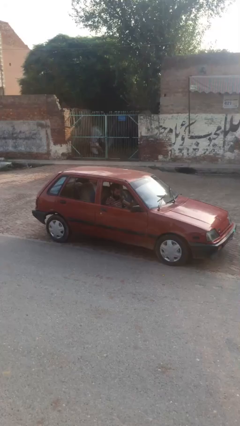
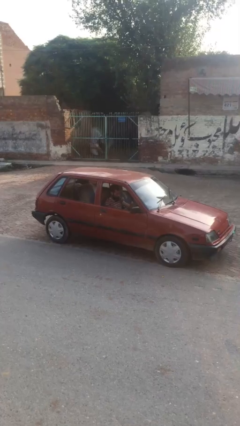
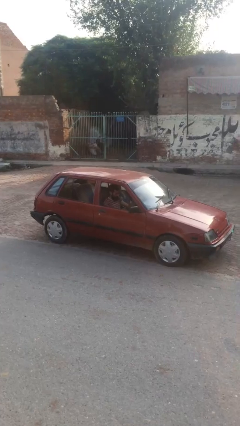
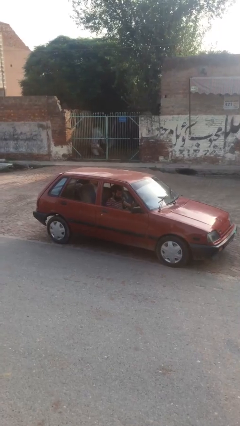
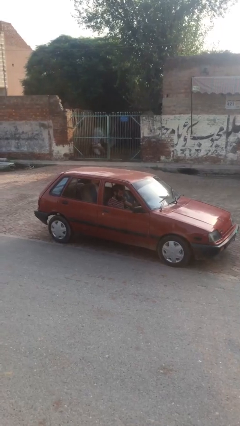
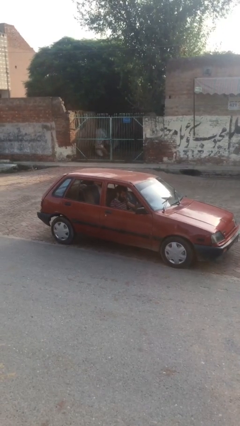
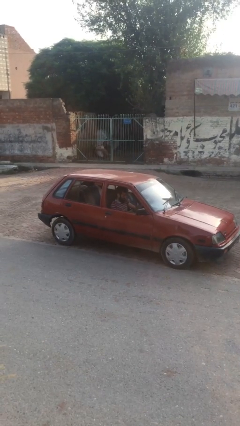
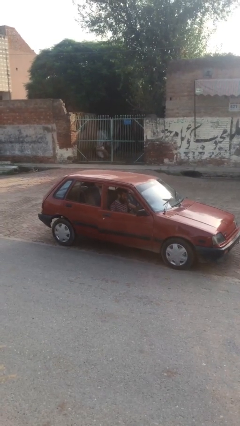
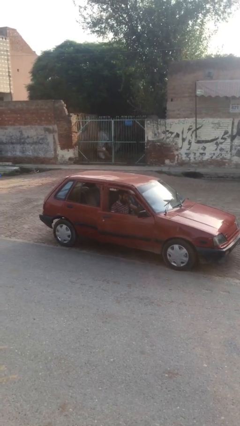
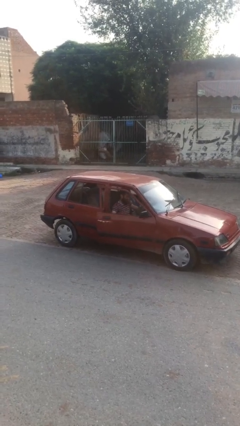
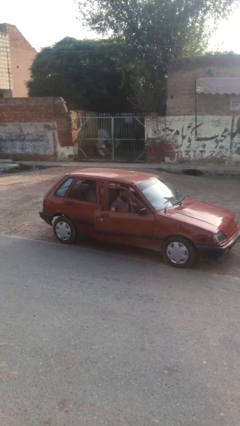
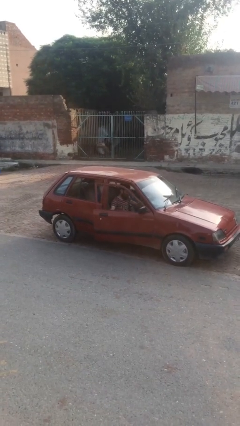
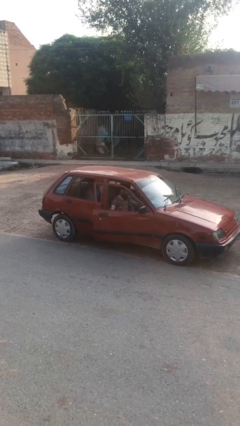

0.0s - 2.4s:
person opens car door

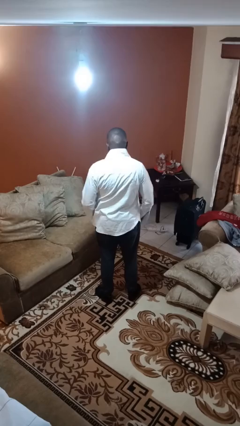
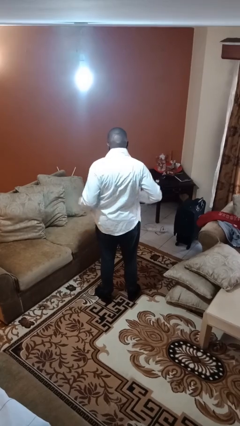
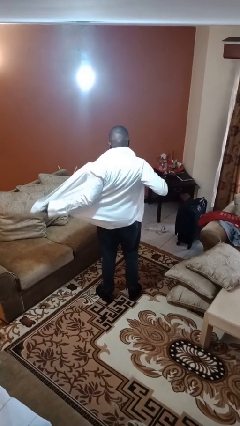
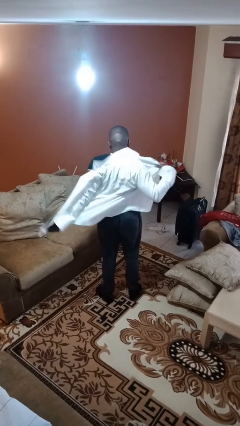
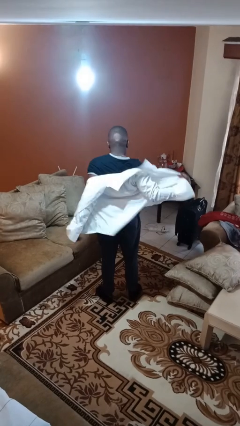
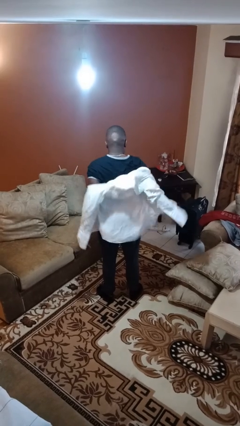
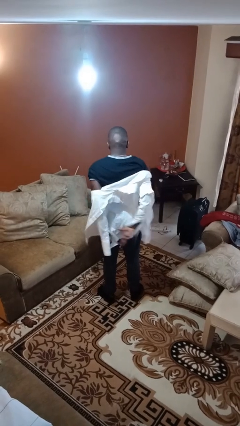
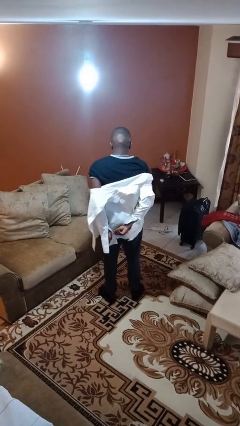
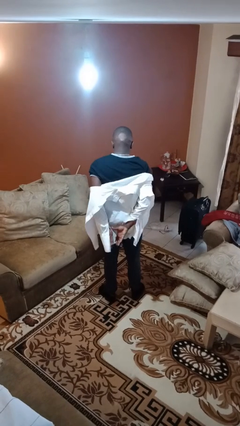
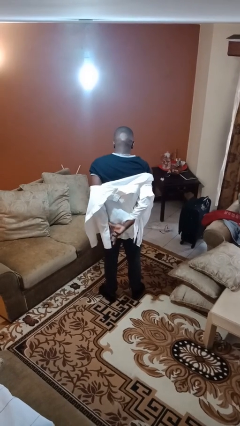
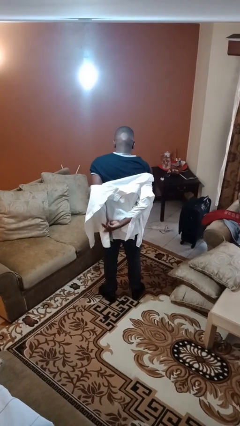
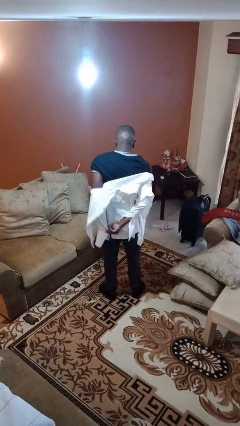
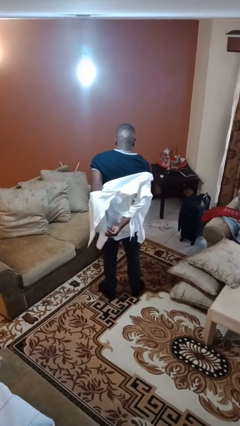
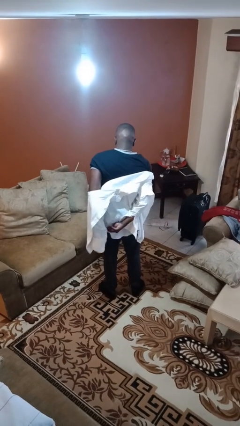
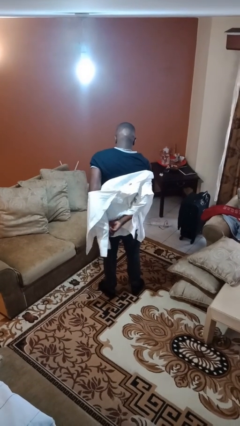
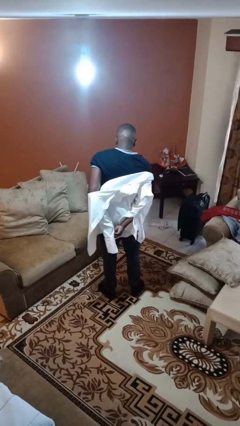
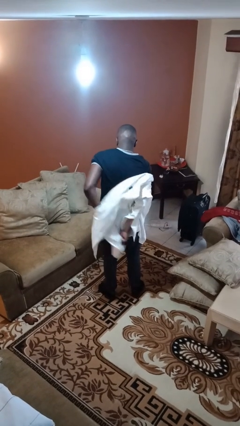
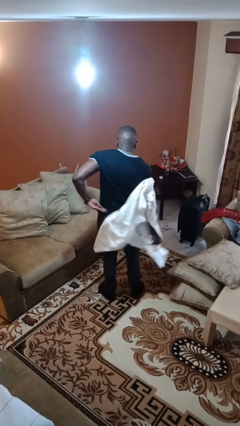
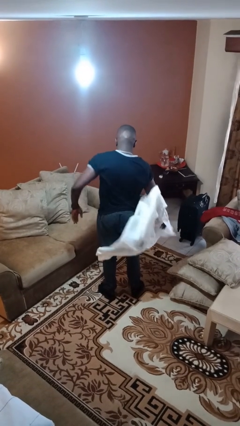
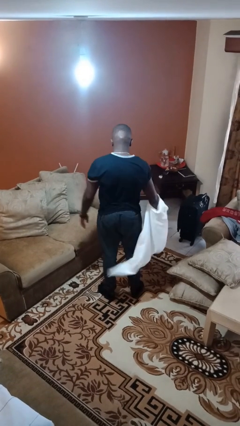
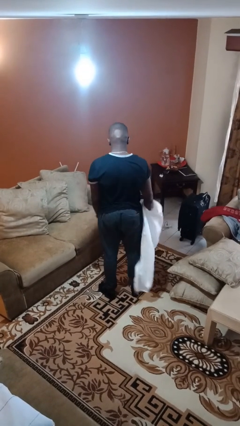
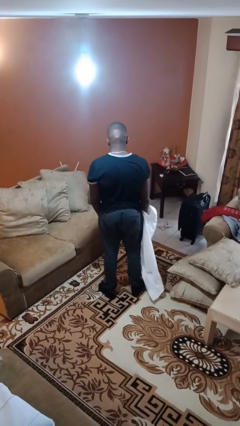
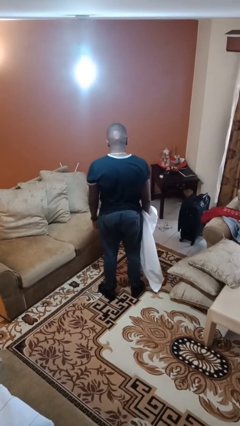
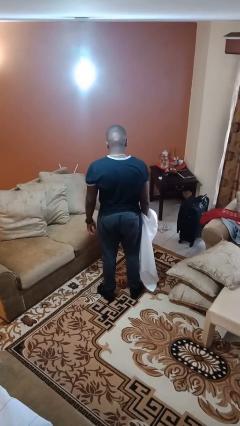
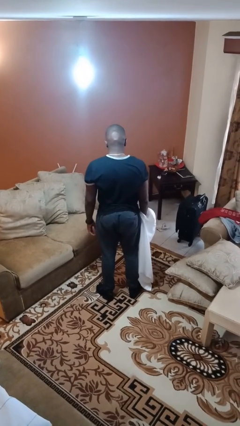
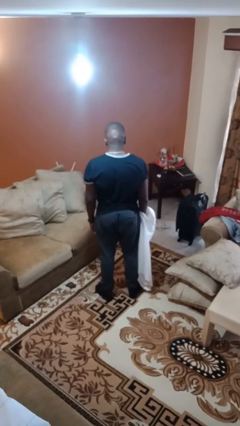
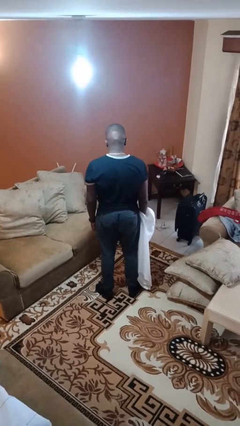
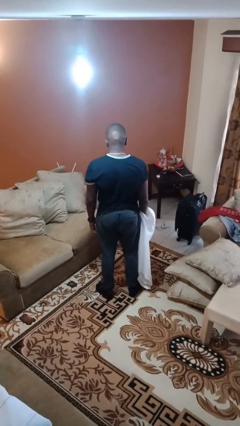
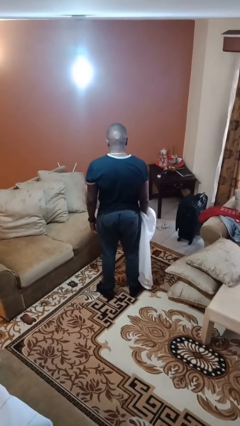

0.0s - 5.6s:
person takes off shirt

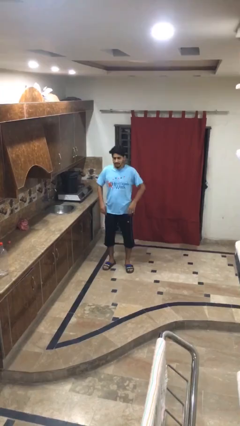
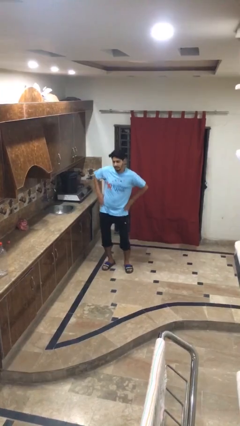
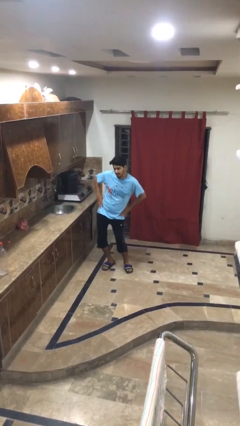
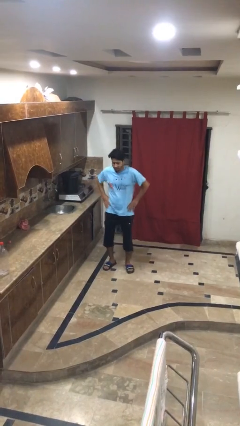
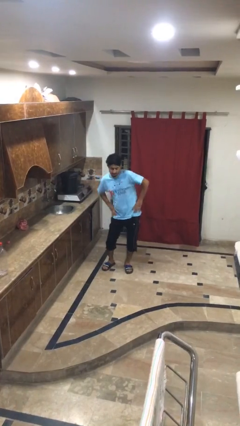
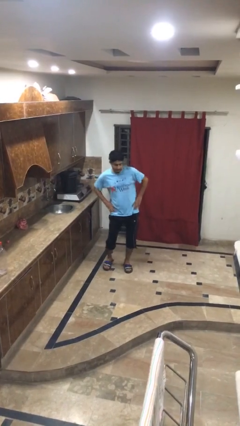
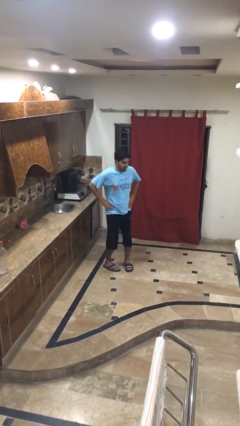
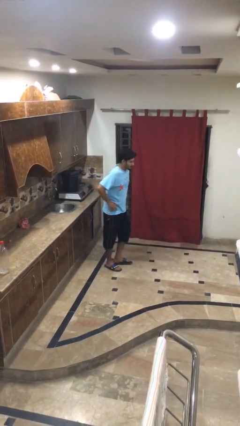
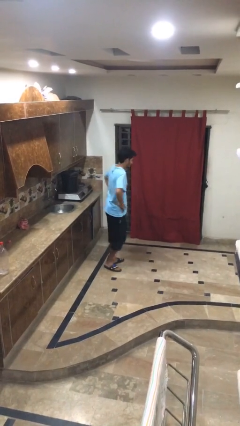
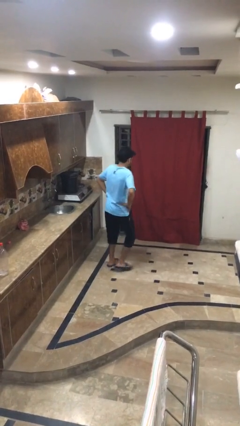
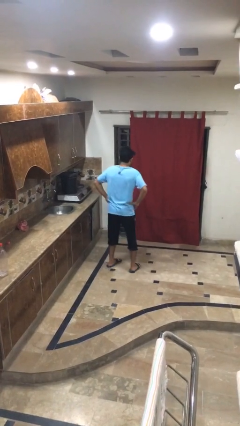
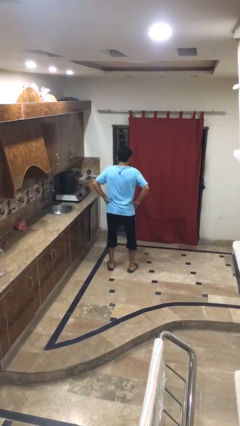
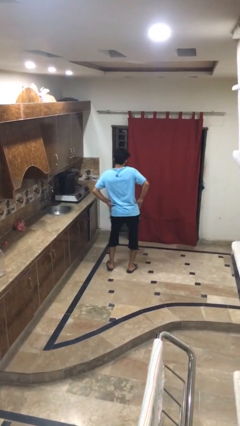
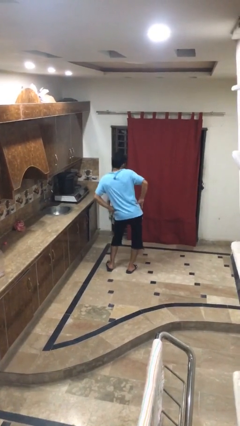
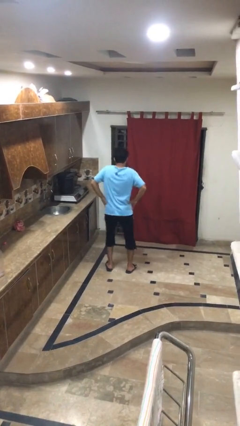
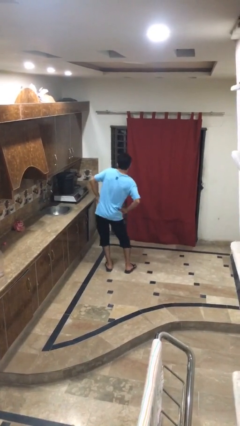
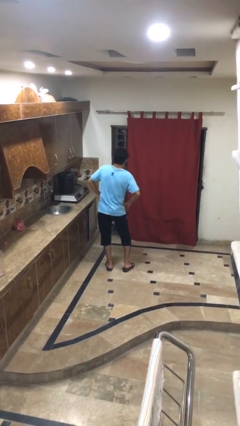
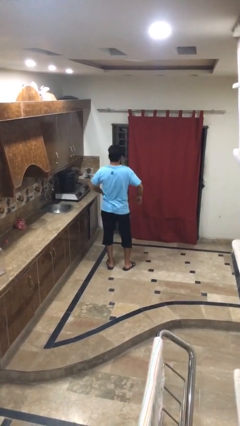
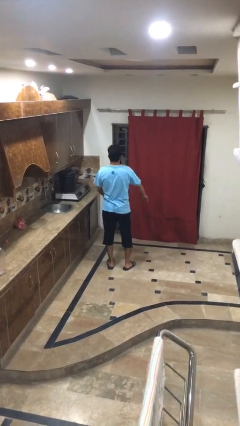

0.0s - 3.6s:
person wiggles hips

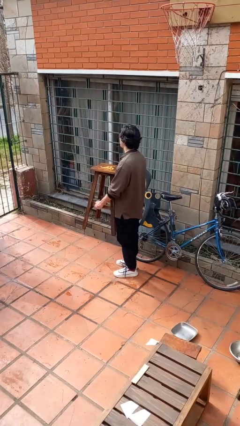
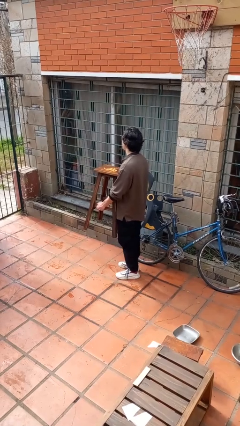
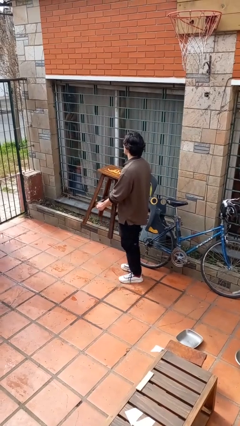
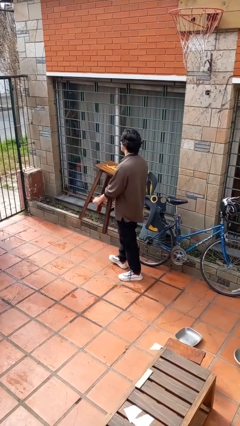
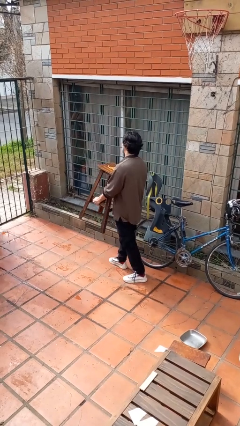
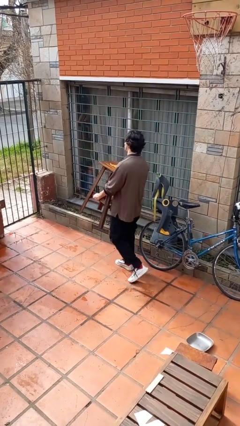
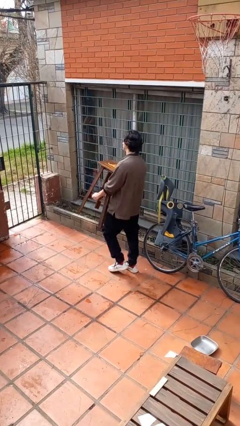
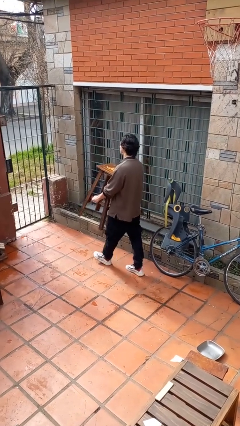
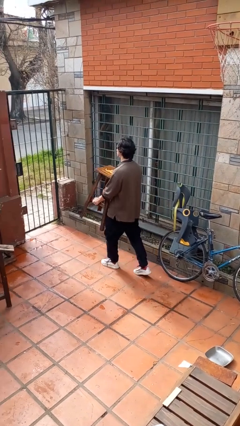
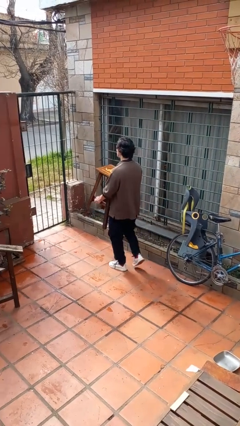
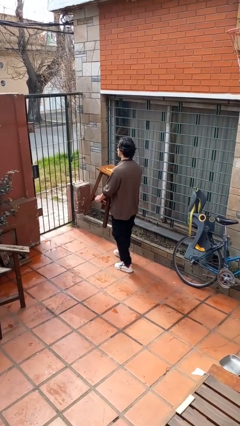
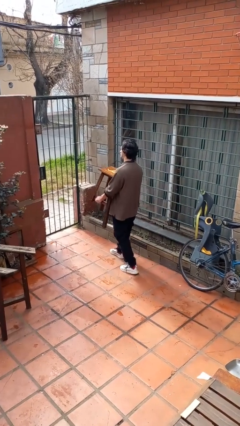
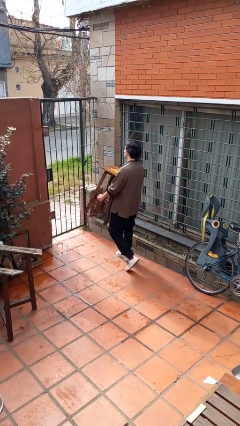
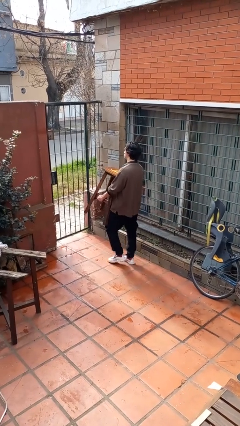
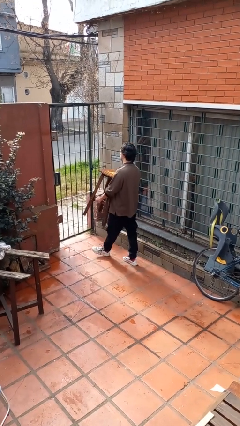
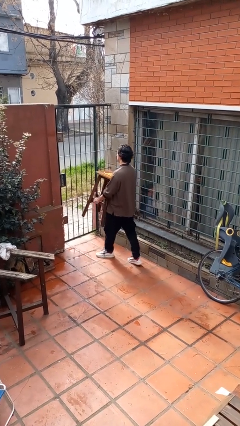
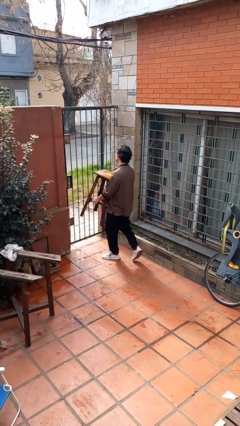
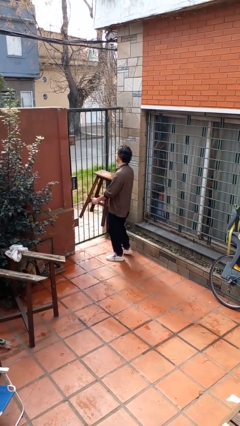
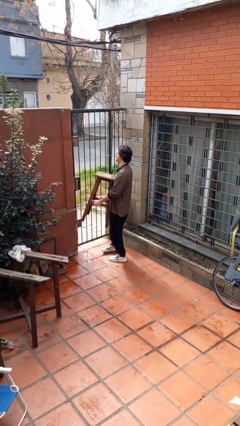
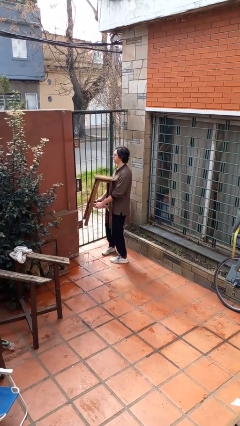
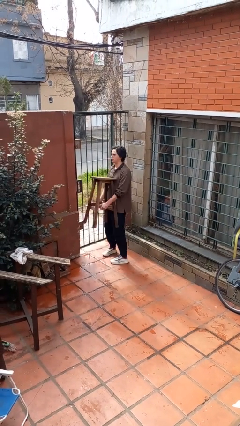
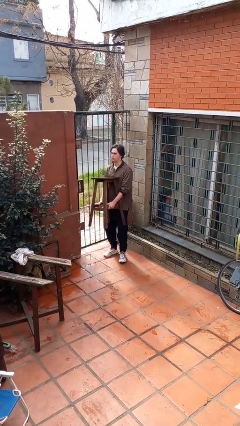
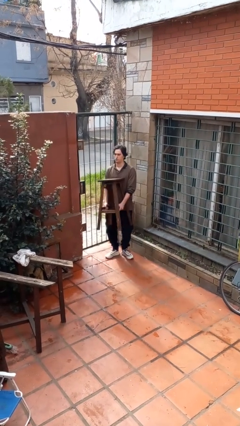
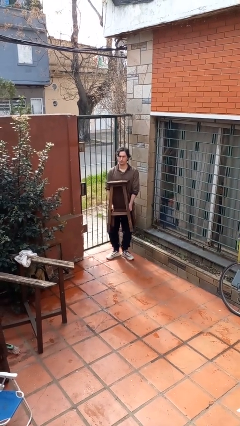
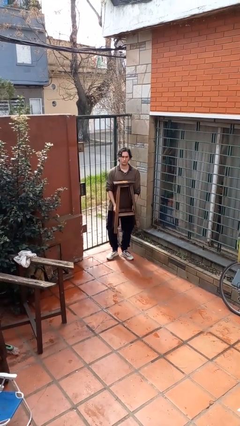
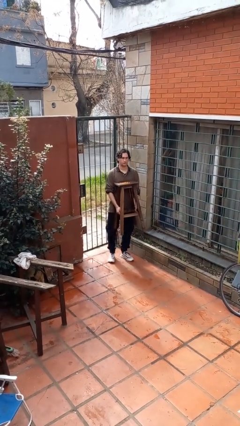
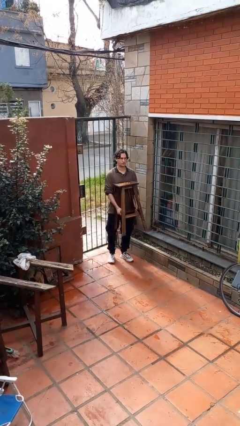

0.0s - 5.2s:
person carries furniture

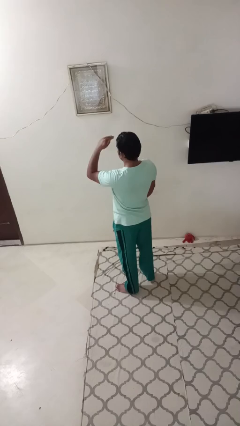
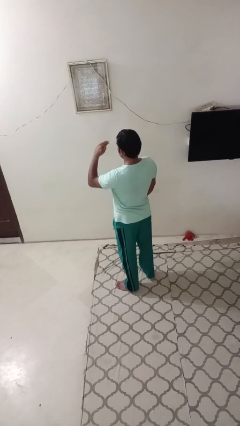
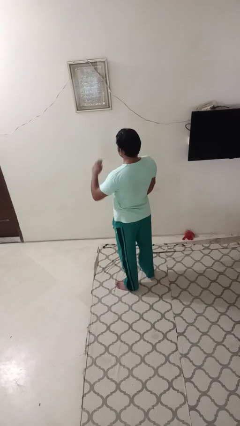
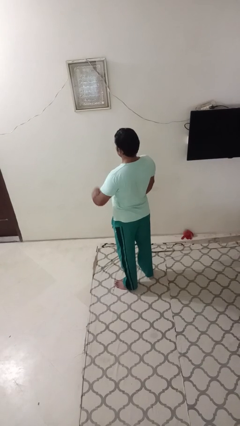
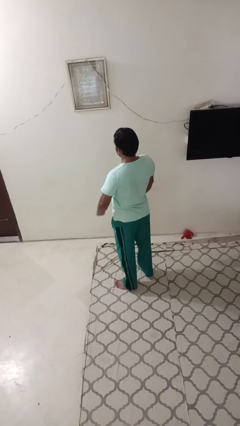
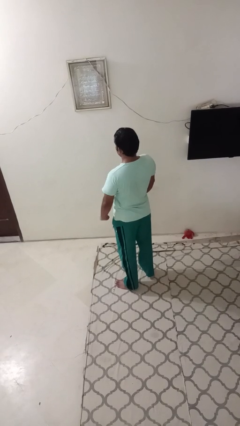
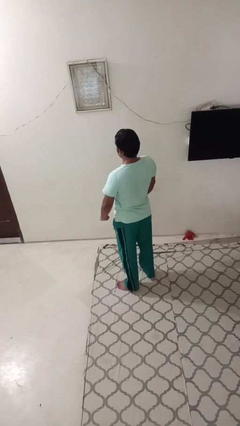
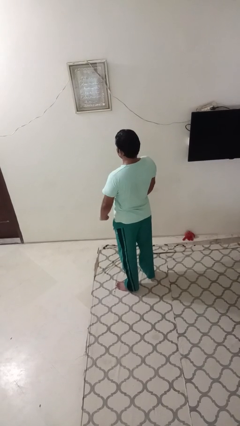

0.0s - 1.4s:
person gestures swipe down
